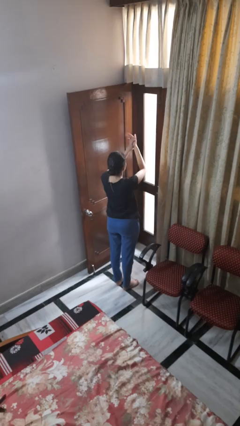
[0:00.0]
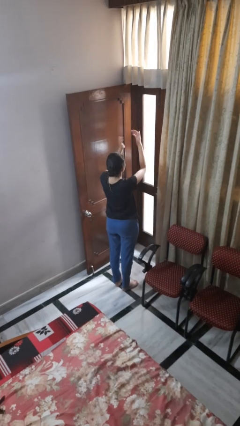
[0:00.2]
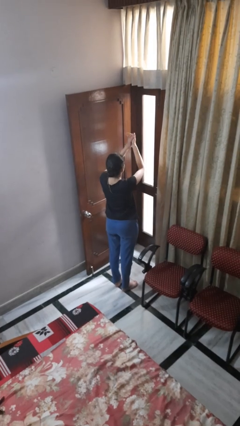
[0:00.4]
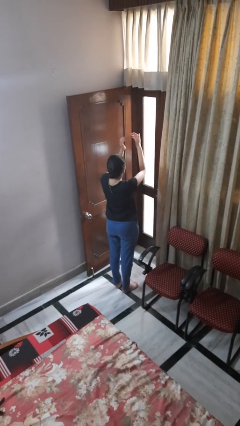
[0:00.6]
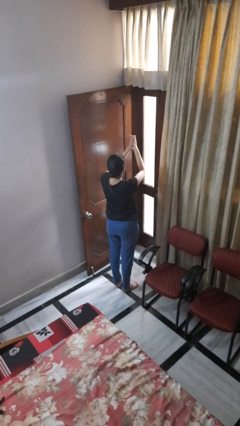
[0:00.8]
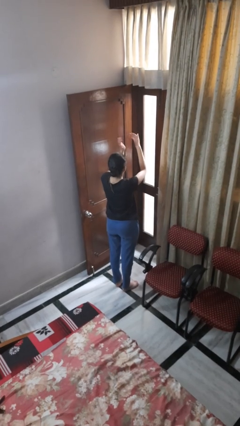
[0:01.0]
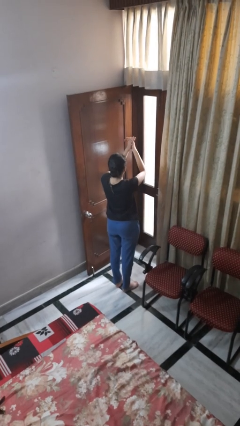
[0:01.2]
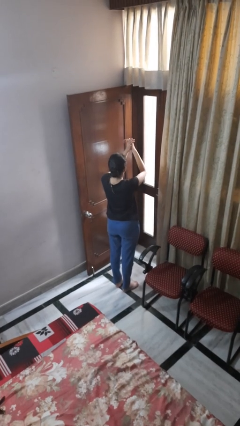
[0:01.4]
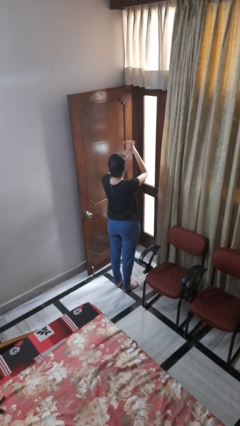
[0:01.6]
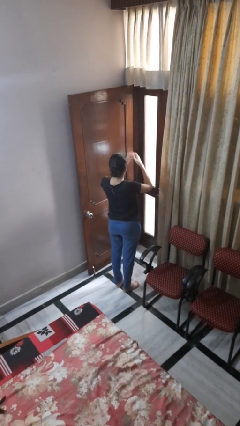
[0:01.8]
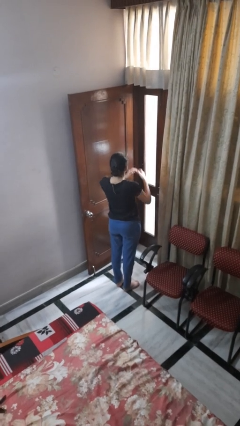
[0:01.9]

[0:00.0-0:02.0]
person claps hands

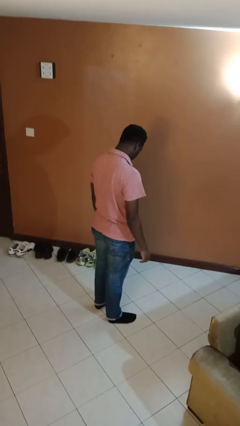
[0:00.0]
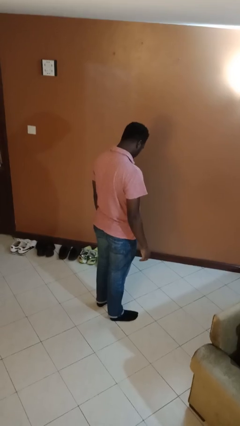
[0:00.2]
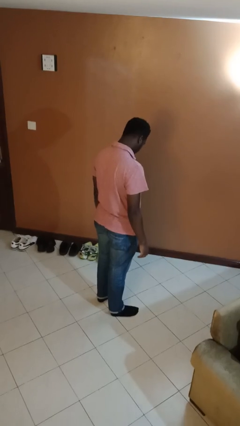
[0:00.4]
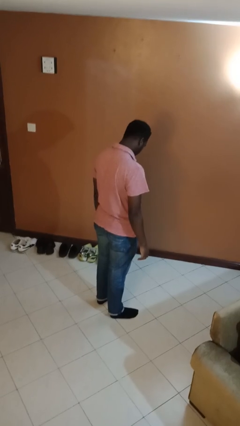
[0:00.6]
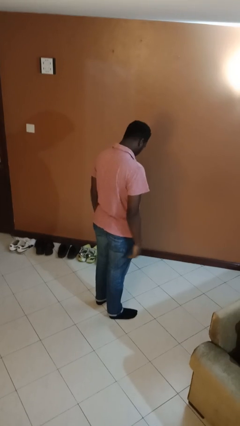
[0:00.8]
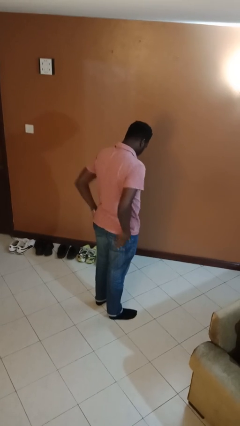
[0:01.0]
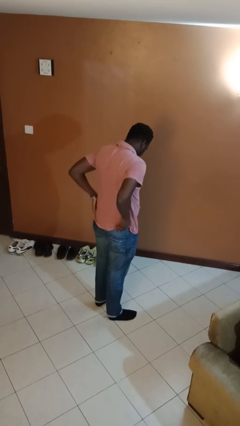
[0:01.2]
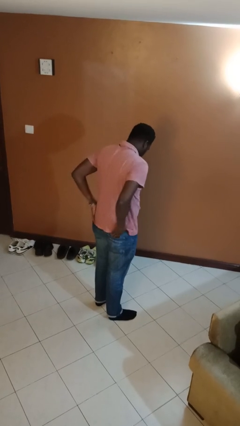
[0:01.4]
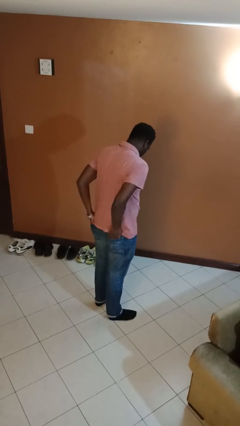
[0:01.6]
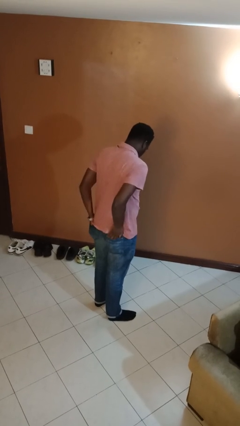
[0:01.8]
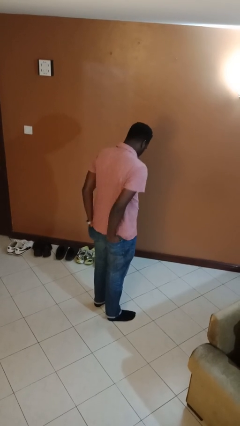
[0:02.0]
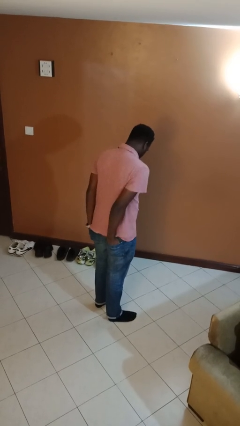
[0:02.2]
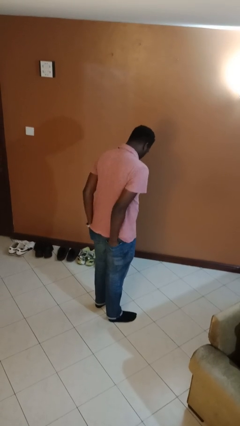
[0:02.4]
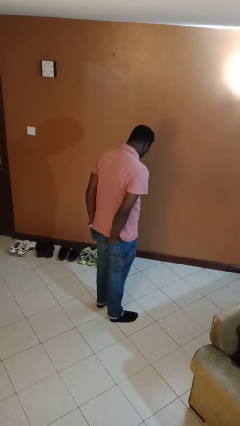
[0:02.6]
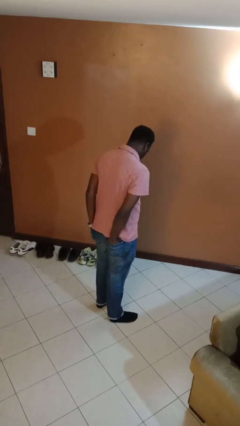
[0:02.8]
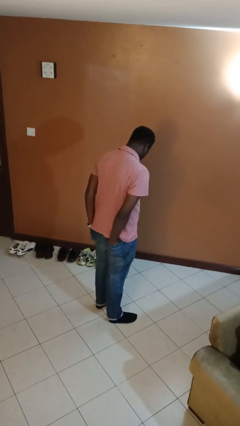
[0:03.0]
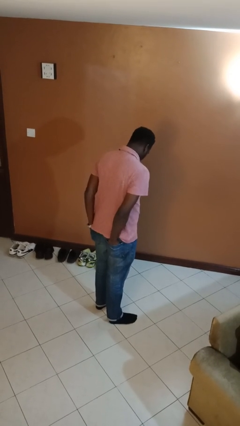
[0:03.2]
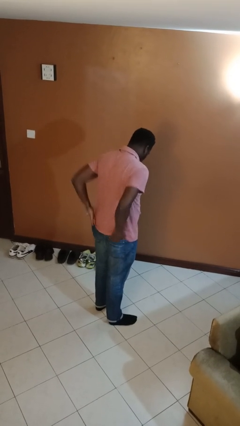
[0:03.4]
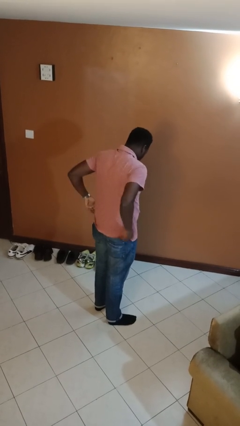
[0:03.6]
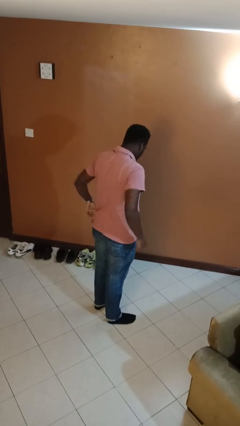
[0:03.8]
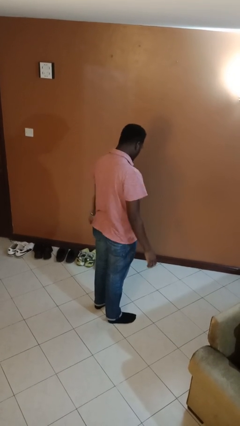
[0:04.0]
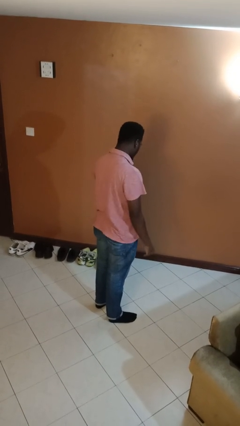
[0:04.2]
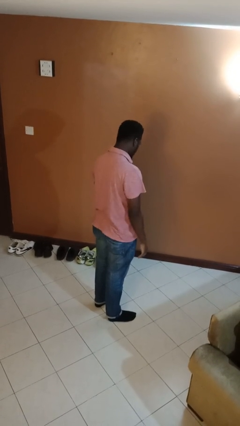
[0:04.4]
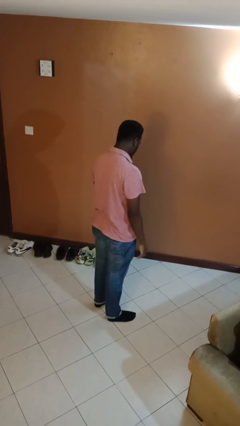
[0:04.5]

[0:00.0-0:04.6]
person puts hands in back pockets

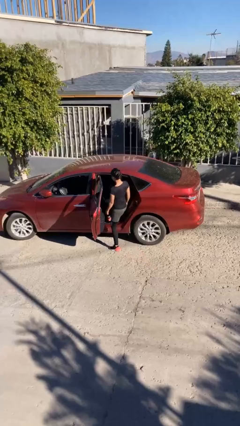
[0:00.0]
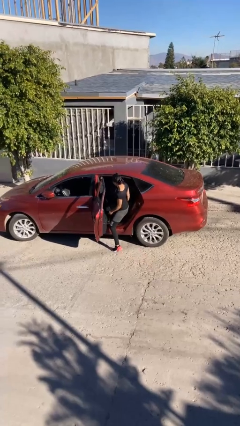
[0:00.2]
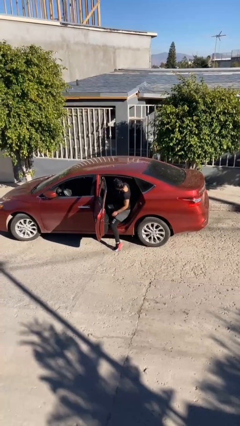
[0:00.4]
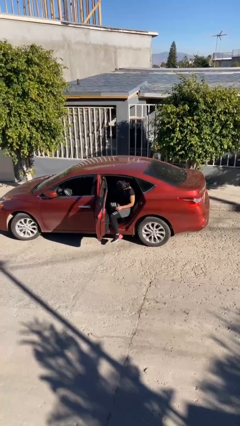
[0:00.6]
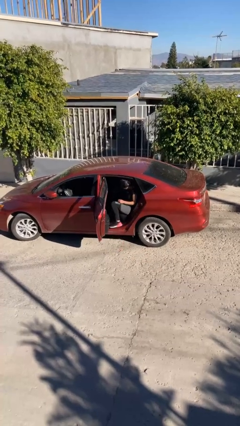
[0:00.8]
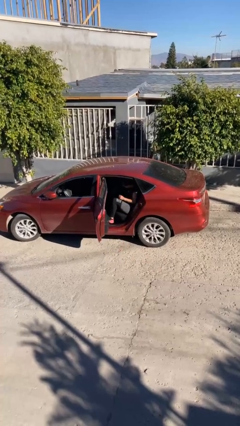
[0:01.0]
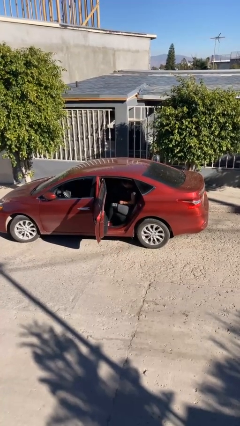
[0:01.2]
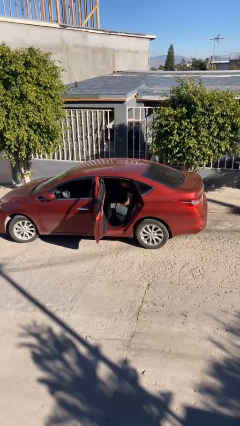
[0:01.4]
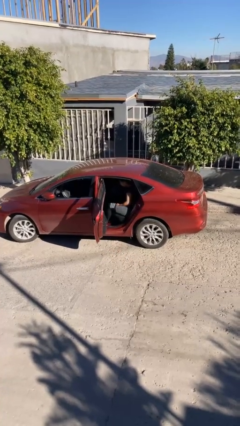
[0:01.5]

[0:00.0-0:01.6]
person enters car

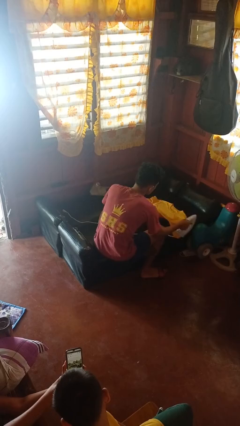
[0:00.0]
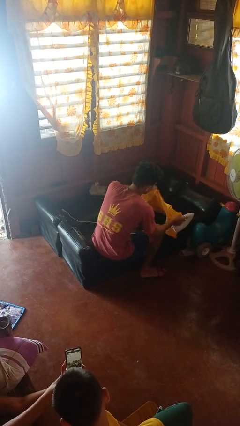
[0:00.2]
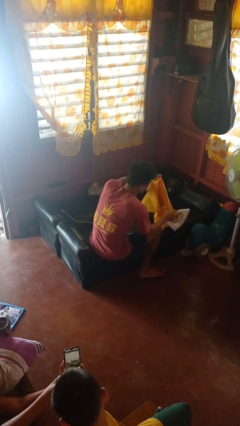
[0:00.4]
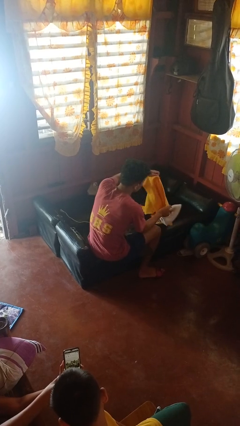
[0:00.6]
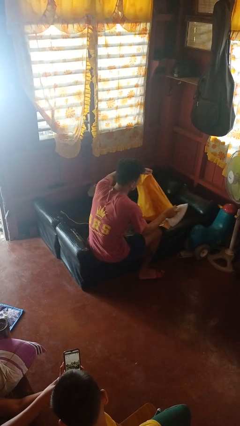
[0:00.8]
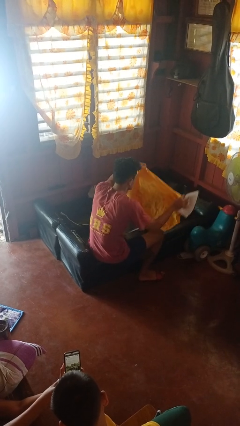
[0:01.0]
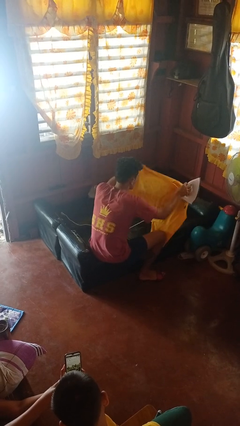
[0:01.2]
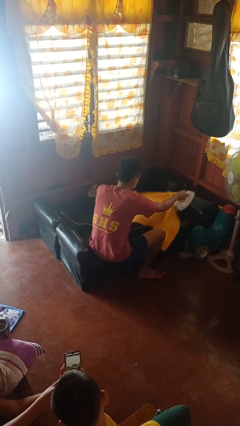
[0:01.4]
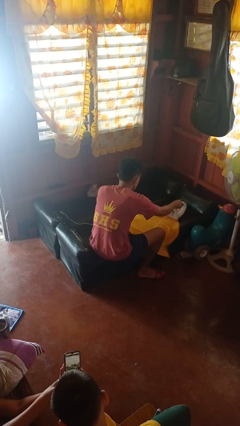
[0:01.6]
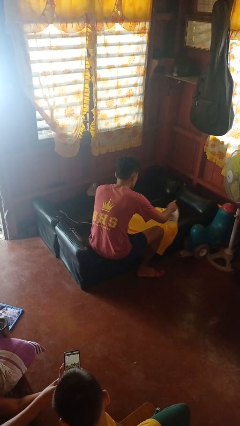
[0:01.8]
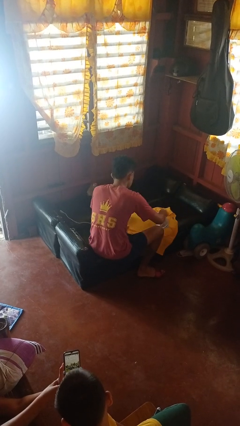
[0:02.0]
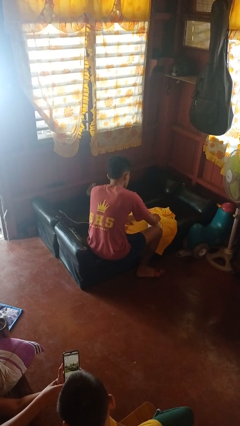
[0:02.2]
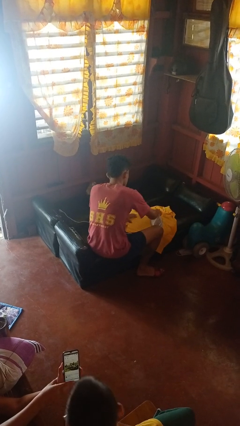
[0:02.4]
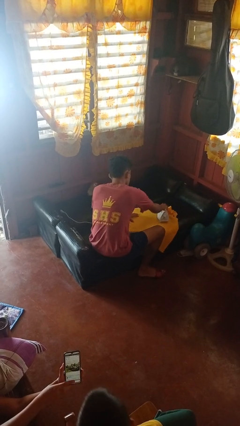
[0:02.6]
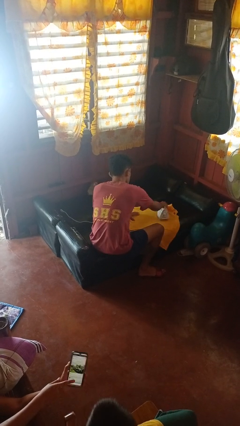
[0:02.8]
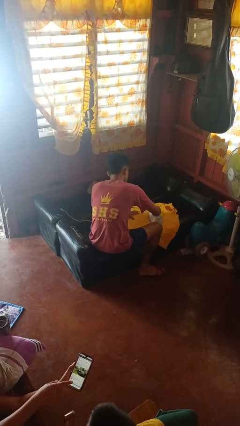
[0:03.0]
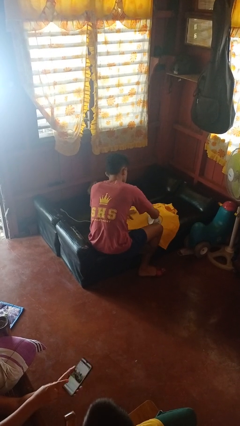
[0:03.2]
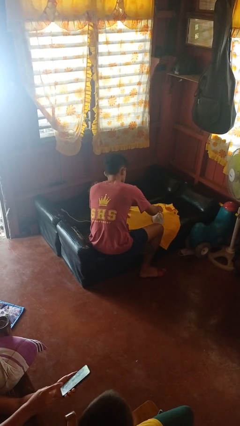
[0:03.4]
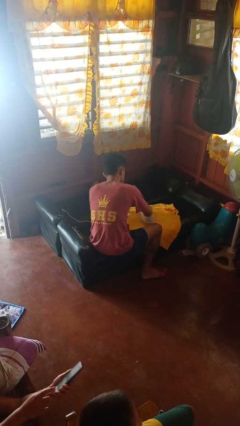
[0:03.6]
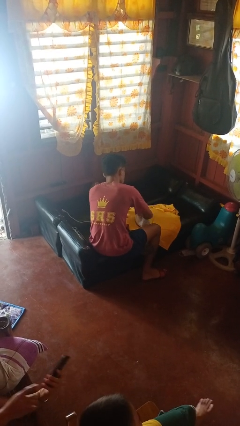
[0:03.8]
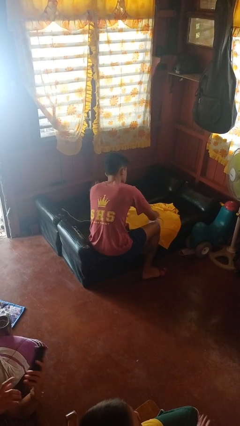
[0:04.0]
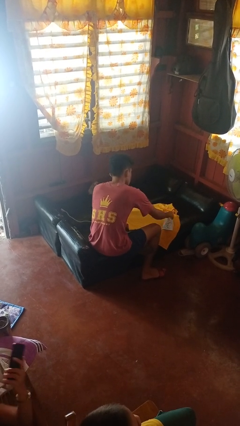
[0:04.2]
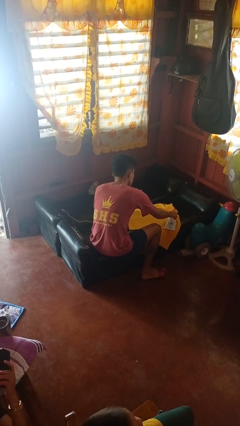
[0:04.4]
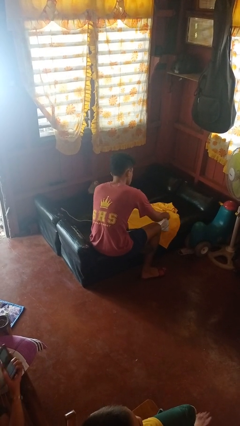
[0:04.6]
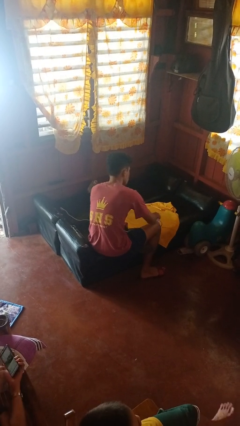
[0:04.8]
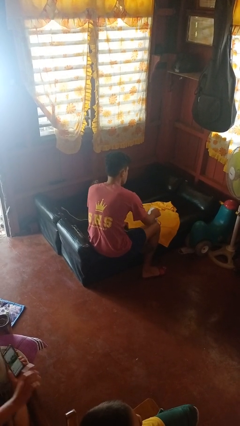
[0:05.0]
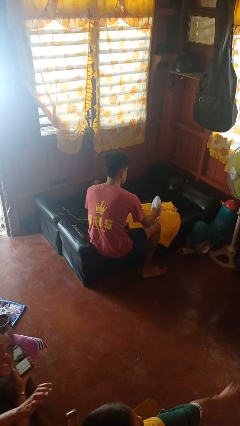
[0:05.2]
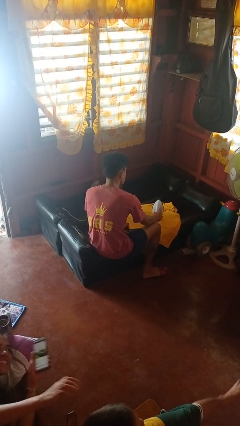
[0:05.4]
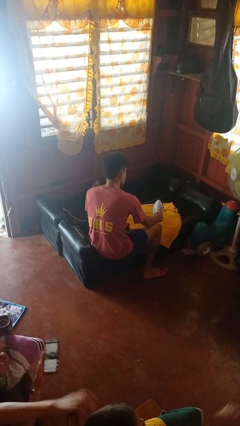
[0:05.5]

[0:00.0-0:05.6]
person irons clothes

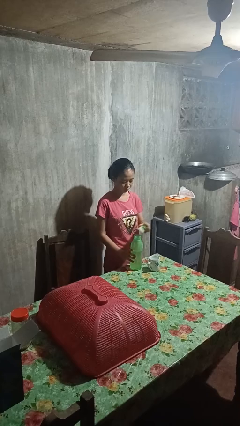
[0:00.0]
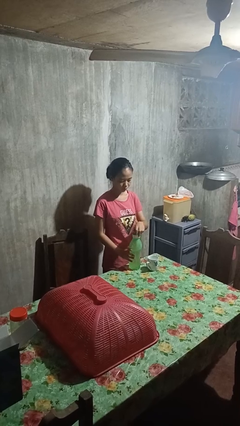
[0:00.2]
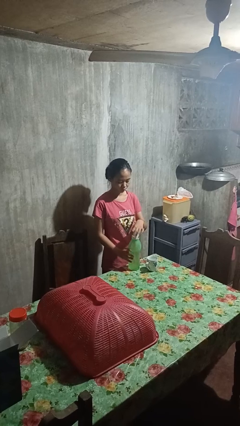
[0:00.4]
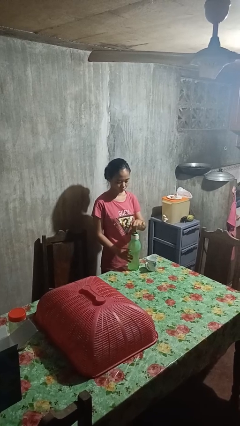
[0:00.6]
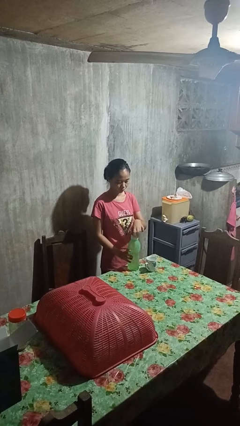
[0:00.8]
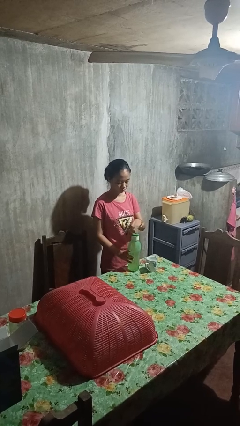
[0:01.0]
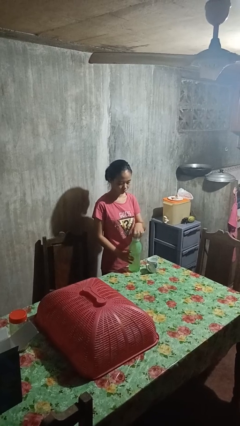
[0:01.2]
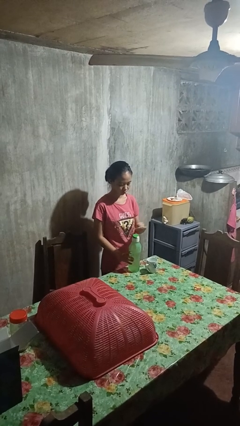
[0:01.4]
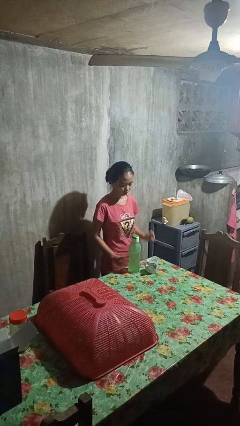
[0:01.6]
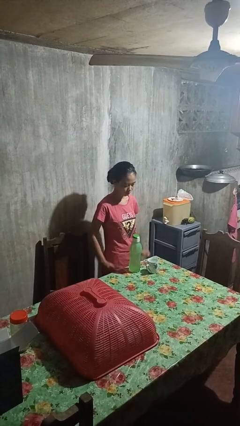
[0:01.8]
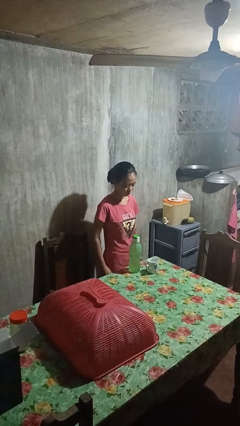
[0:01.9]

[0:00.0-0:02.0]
person screws lid to bottle

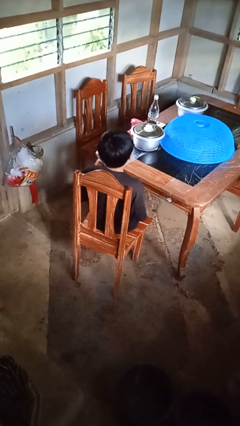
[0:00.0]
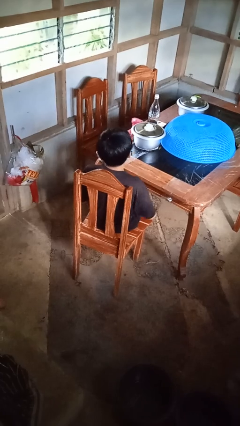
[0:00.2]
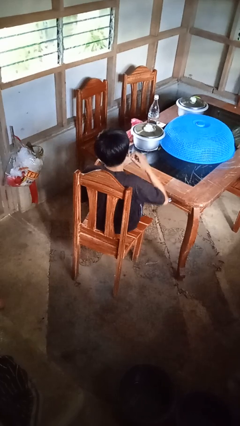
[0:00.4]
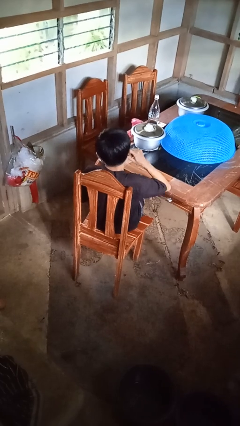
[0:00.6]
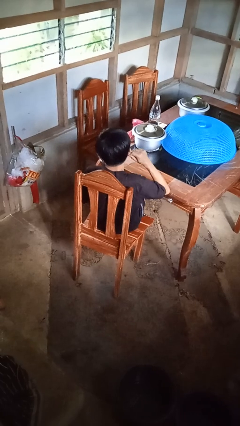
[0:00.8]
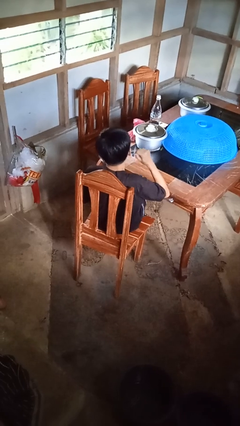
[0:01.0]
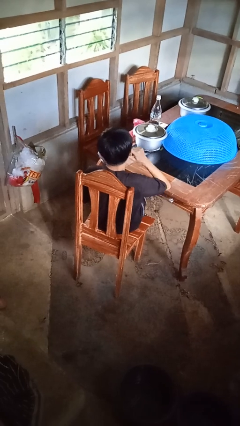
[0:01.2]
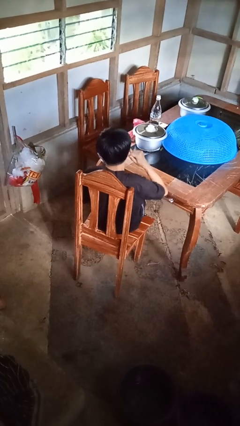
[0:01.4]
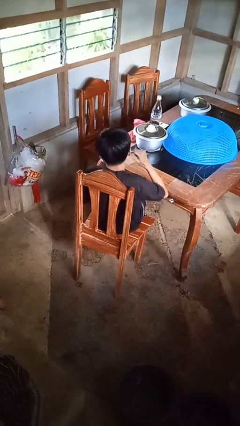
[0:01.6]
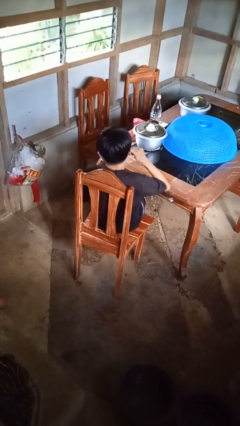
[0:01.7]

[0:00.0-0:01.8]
person touches earlobe
